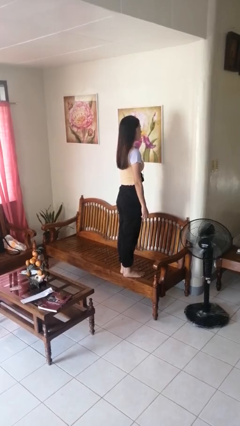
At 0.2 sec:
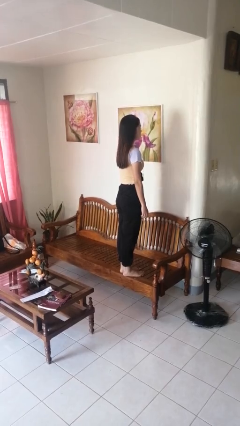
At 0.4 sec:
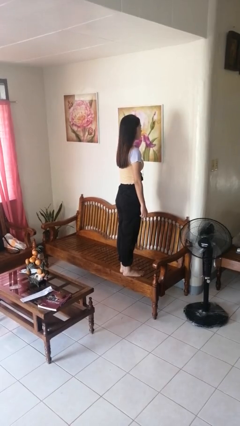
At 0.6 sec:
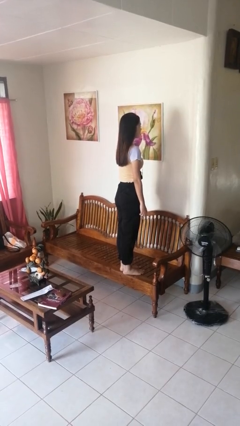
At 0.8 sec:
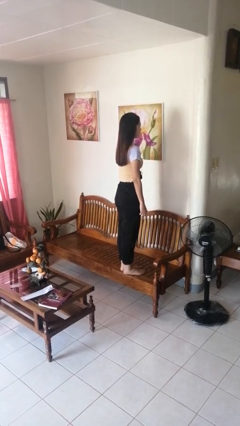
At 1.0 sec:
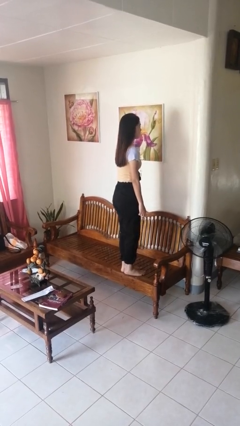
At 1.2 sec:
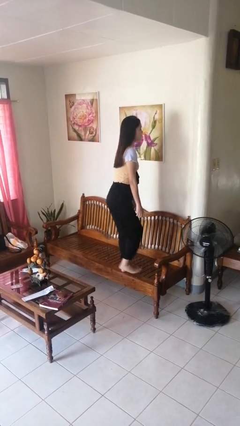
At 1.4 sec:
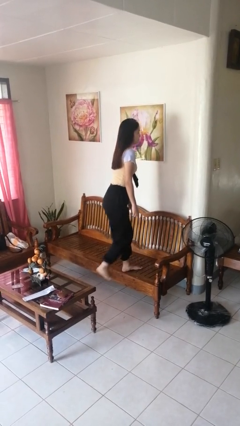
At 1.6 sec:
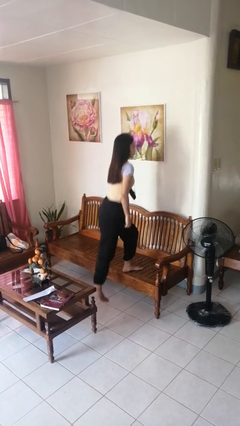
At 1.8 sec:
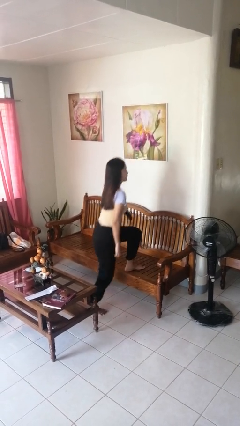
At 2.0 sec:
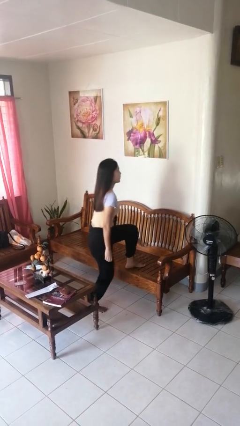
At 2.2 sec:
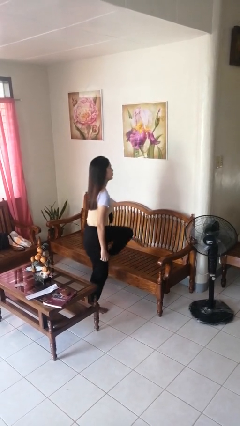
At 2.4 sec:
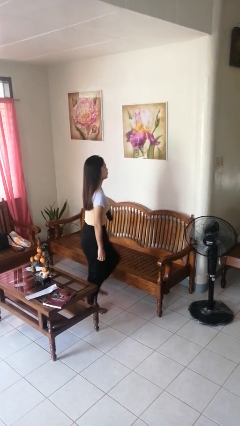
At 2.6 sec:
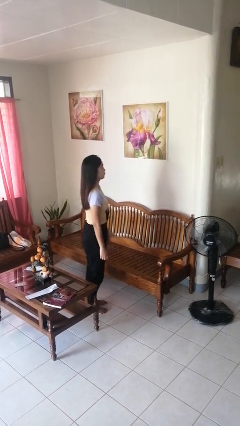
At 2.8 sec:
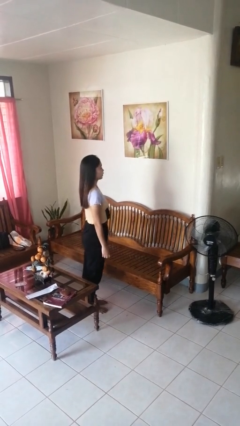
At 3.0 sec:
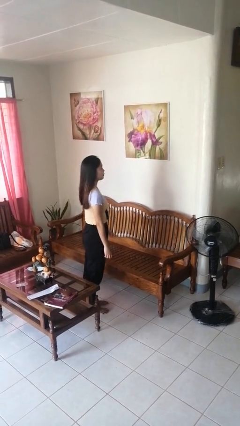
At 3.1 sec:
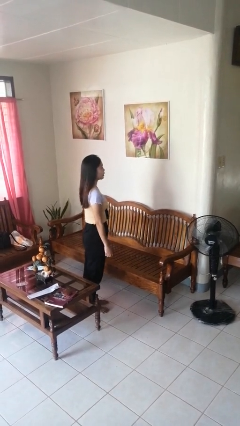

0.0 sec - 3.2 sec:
person climbs off chair

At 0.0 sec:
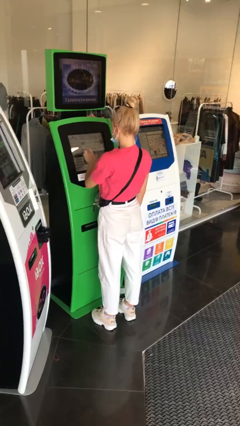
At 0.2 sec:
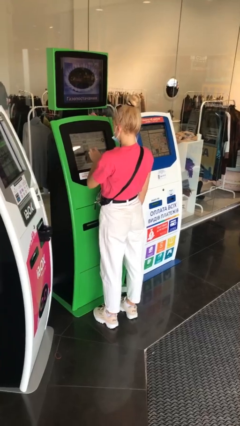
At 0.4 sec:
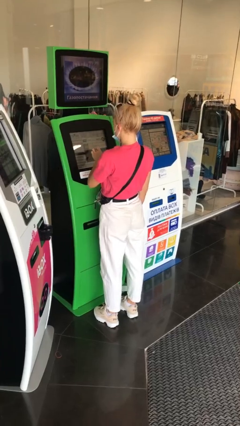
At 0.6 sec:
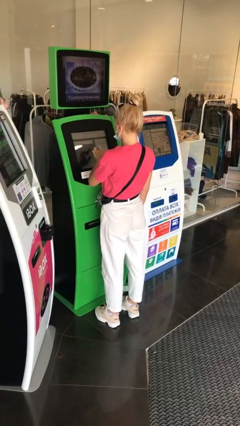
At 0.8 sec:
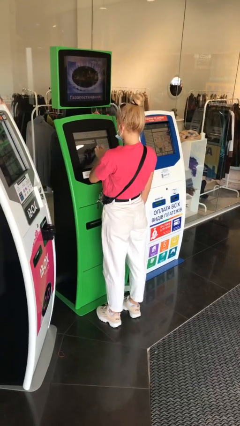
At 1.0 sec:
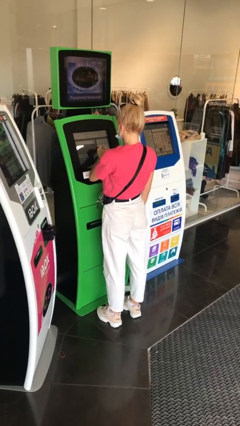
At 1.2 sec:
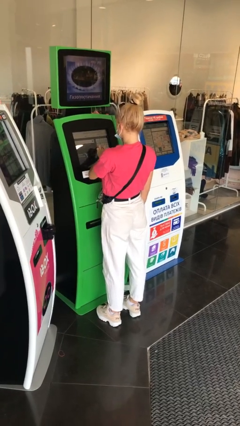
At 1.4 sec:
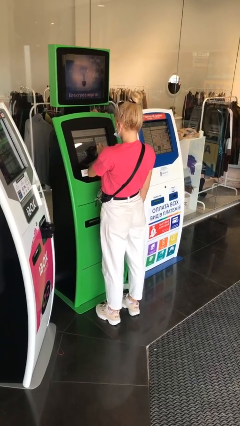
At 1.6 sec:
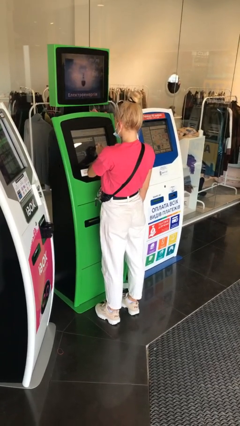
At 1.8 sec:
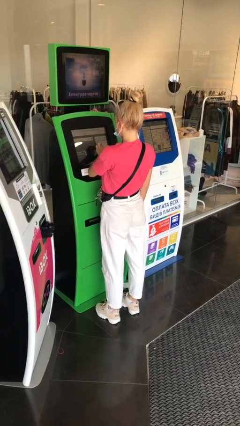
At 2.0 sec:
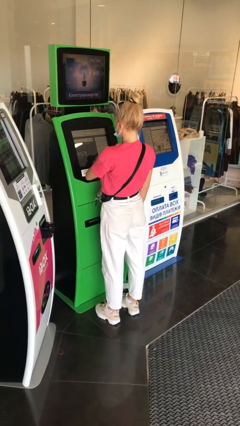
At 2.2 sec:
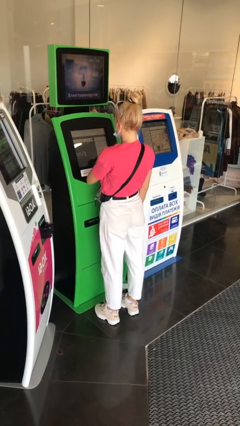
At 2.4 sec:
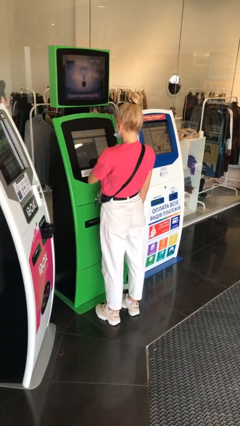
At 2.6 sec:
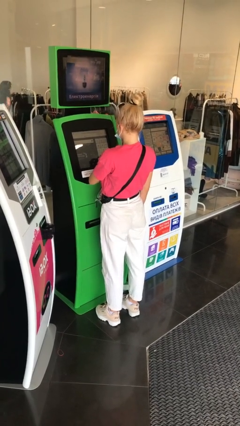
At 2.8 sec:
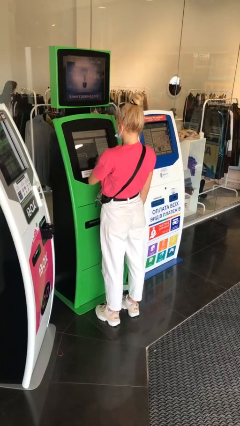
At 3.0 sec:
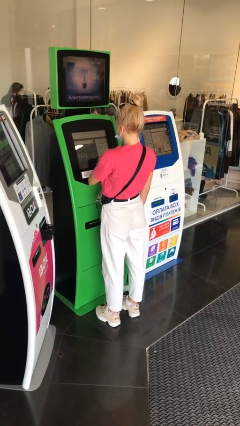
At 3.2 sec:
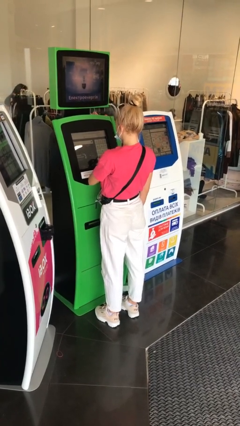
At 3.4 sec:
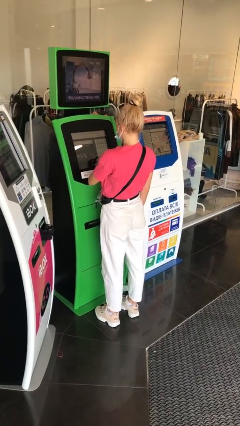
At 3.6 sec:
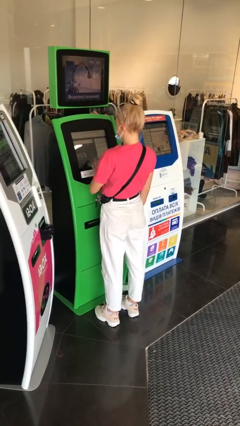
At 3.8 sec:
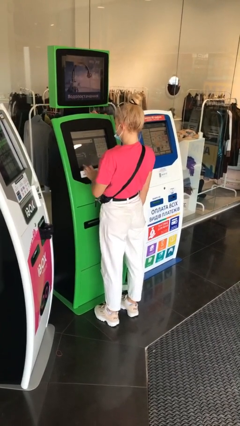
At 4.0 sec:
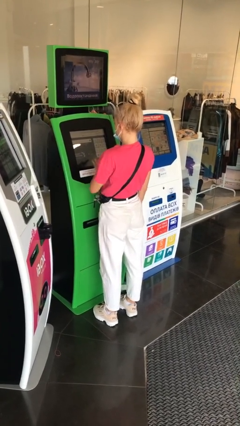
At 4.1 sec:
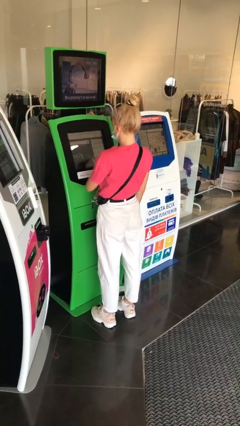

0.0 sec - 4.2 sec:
person purchases from machine

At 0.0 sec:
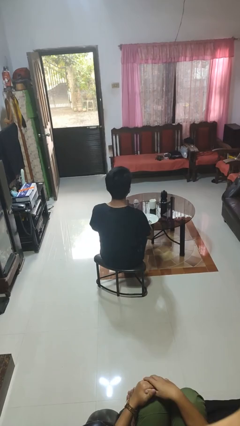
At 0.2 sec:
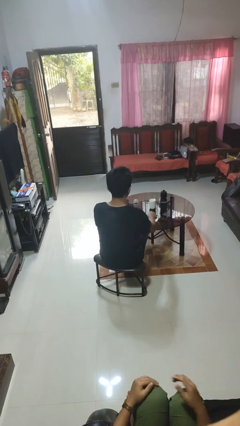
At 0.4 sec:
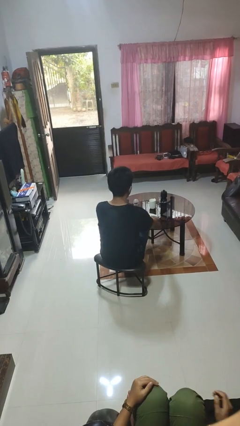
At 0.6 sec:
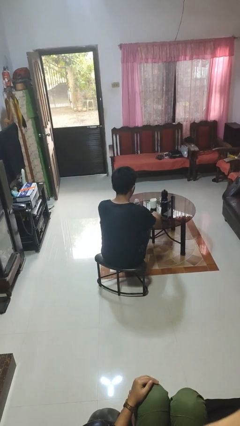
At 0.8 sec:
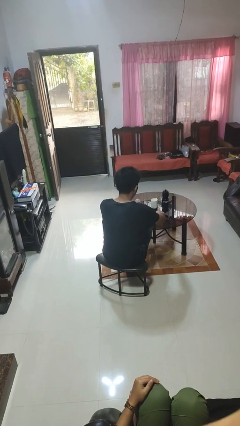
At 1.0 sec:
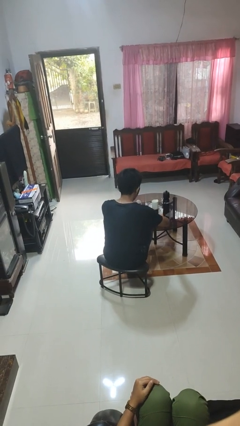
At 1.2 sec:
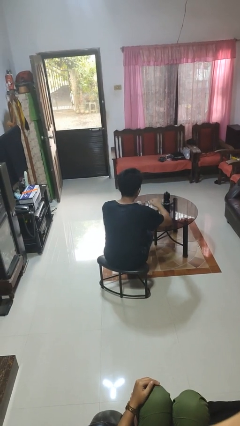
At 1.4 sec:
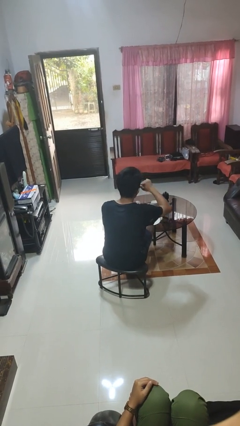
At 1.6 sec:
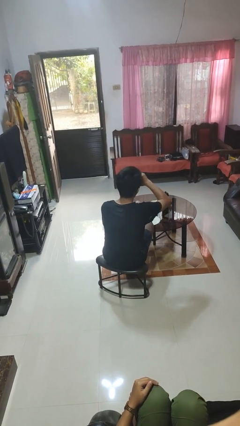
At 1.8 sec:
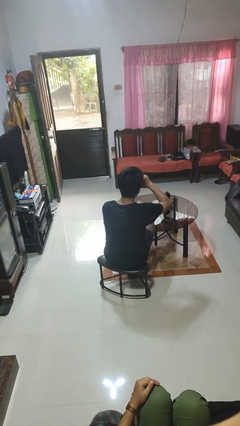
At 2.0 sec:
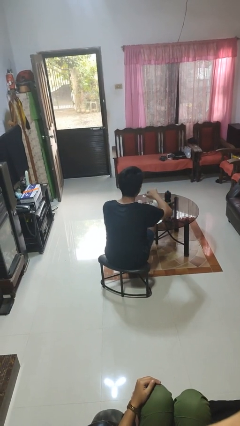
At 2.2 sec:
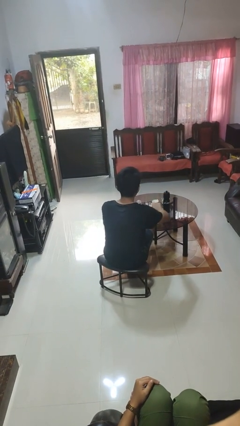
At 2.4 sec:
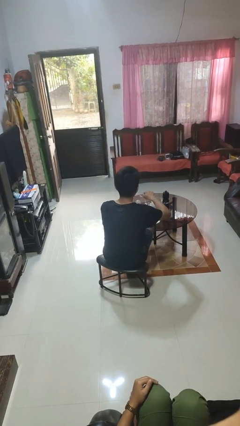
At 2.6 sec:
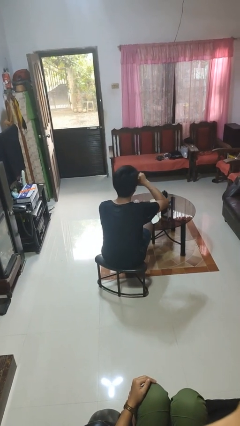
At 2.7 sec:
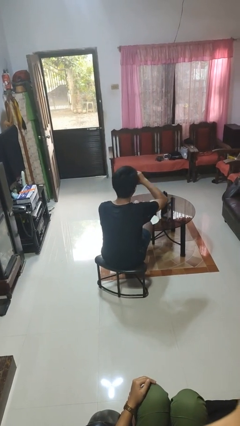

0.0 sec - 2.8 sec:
person eats with utensil

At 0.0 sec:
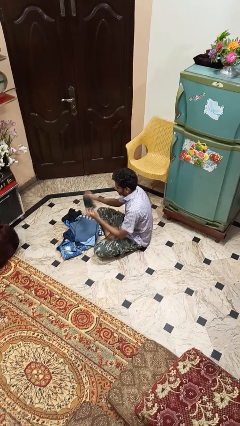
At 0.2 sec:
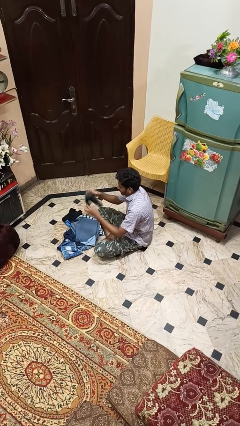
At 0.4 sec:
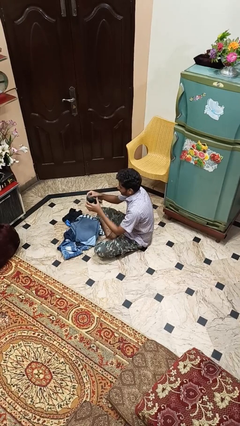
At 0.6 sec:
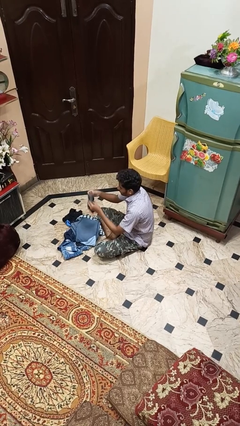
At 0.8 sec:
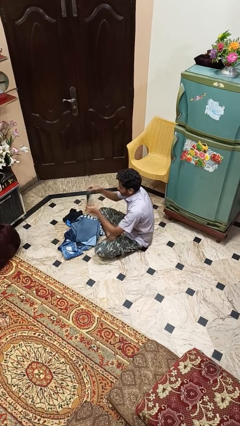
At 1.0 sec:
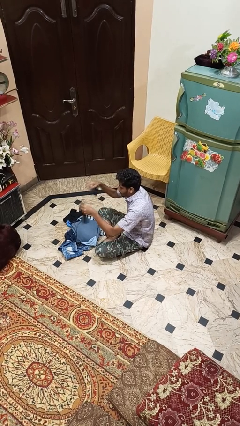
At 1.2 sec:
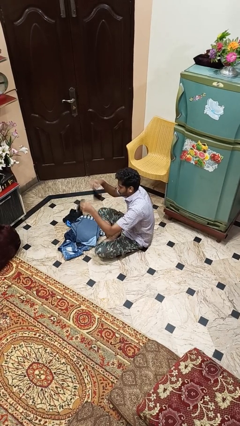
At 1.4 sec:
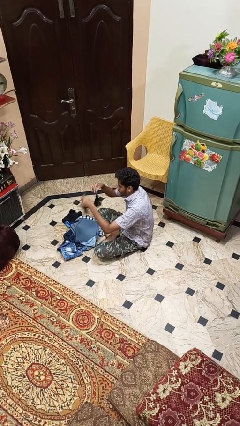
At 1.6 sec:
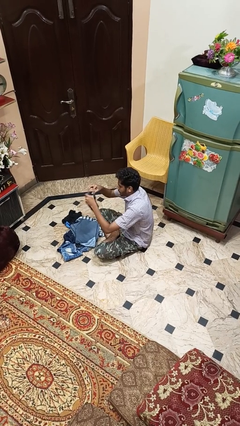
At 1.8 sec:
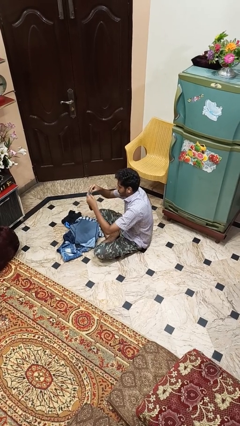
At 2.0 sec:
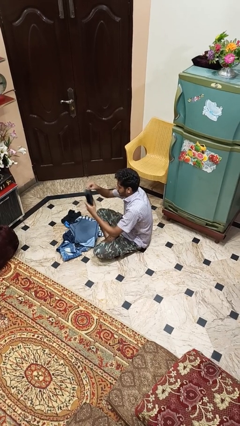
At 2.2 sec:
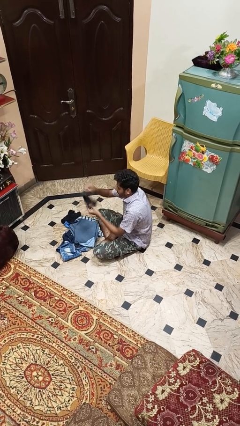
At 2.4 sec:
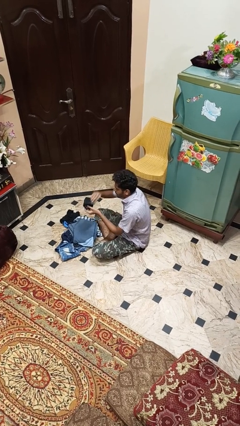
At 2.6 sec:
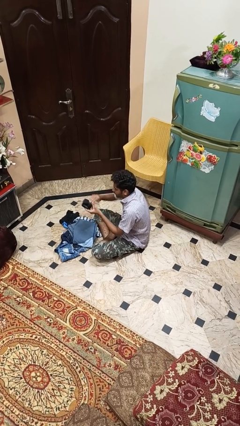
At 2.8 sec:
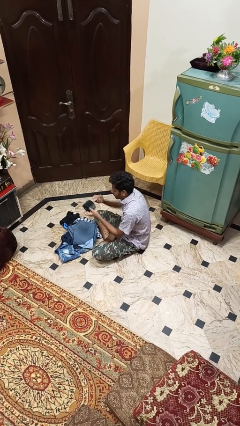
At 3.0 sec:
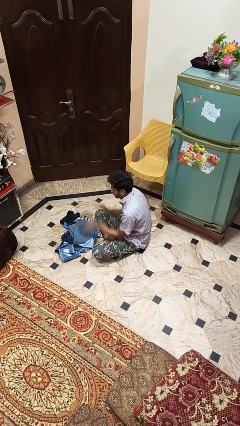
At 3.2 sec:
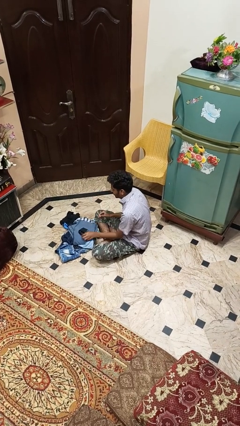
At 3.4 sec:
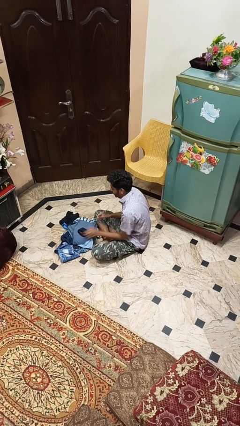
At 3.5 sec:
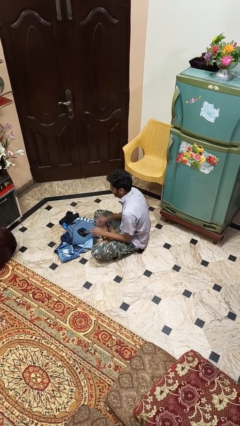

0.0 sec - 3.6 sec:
person folds socks

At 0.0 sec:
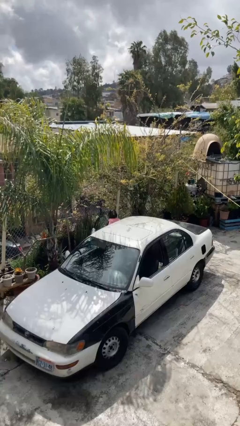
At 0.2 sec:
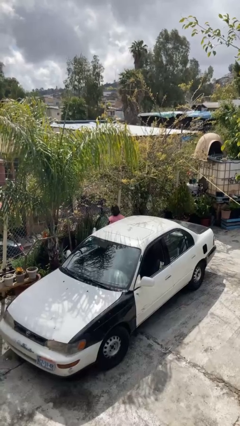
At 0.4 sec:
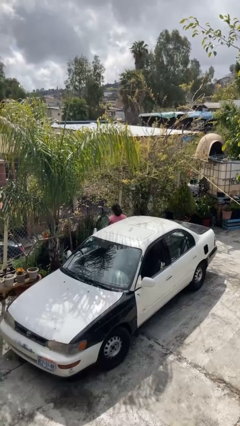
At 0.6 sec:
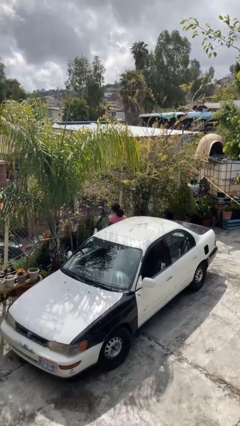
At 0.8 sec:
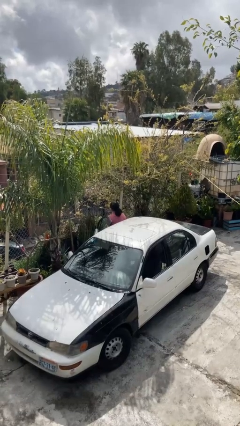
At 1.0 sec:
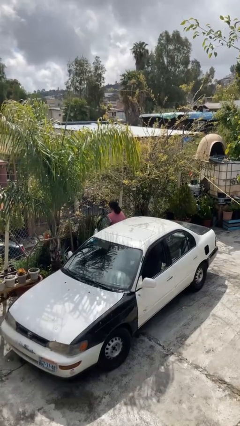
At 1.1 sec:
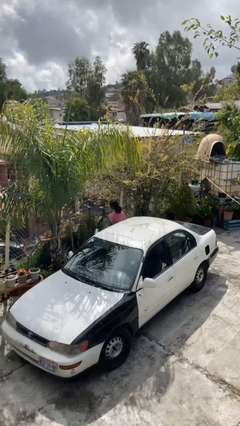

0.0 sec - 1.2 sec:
person exits car

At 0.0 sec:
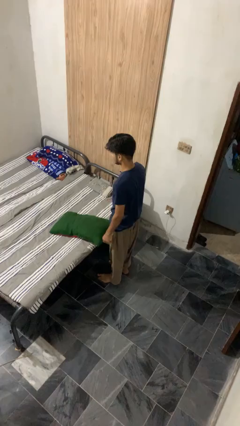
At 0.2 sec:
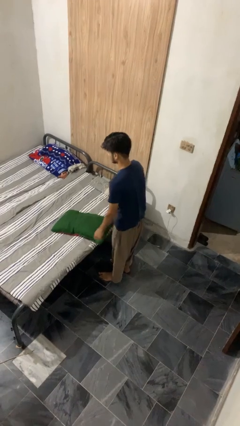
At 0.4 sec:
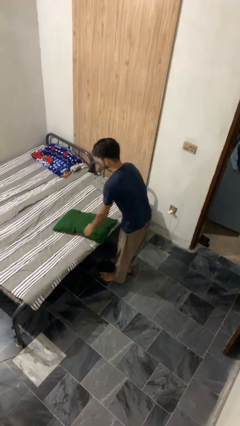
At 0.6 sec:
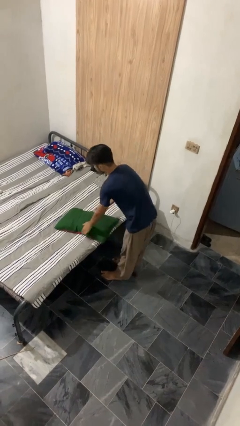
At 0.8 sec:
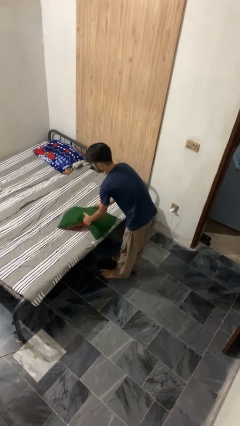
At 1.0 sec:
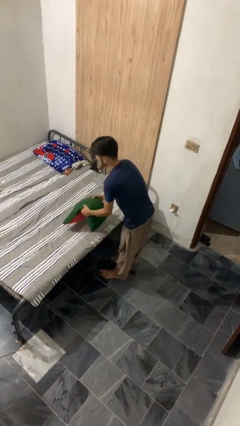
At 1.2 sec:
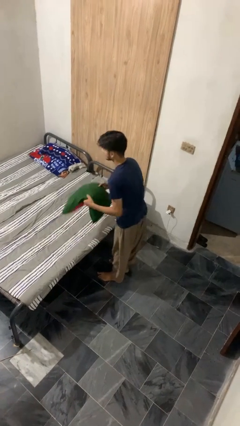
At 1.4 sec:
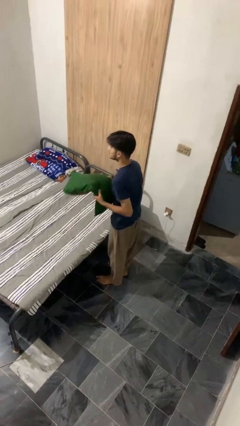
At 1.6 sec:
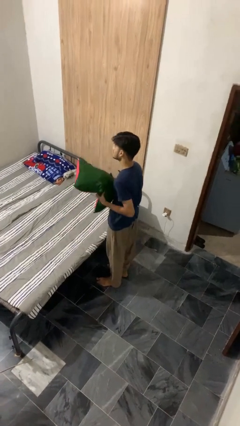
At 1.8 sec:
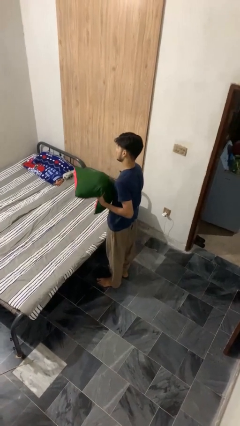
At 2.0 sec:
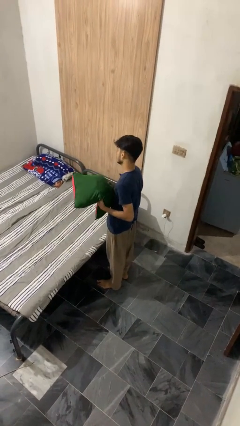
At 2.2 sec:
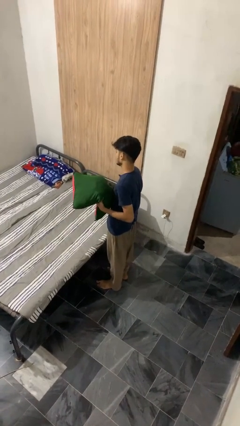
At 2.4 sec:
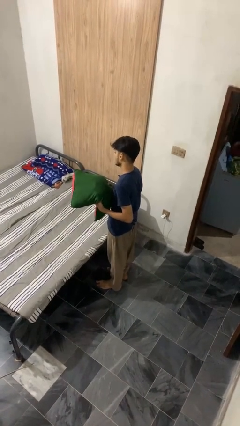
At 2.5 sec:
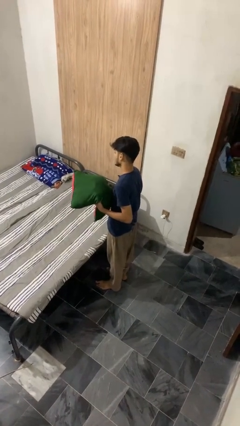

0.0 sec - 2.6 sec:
person picks up object from bed
